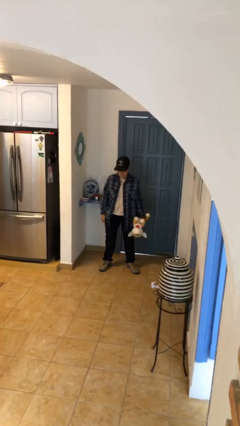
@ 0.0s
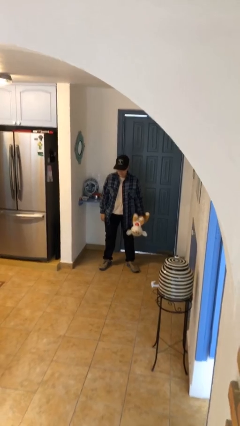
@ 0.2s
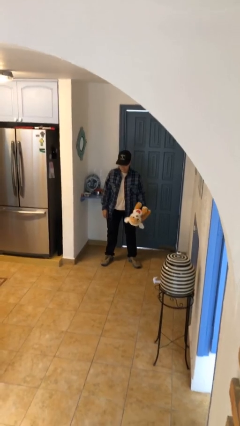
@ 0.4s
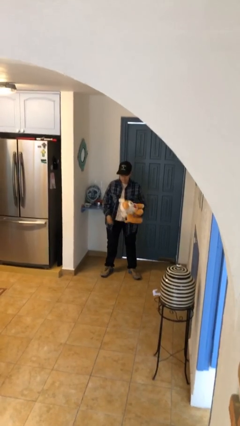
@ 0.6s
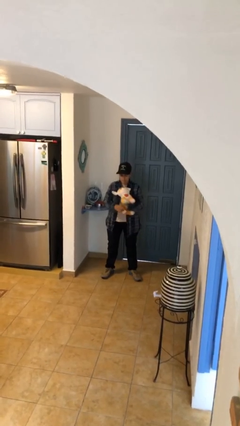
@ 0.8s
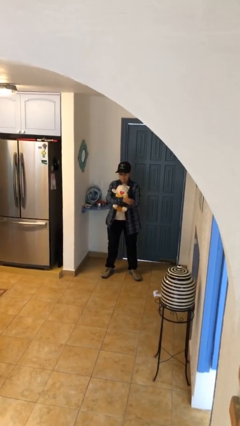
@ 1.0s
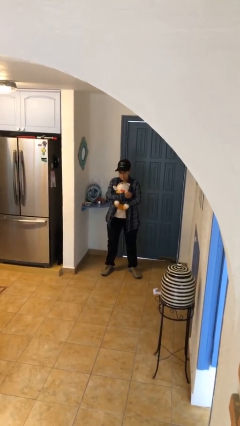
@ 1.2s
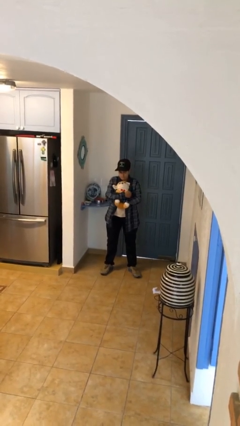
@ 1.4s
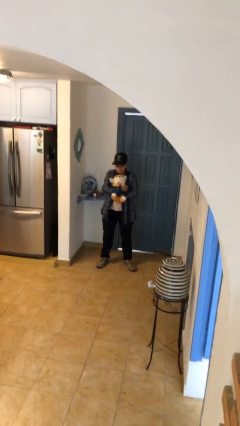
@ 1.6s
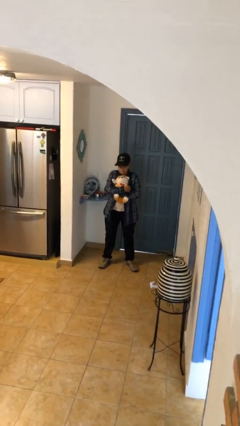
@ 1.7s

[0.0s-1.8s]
person hugs stuffed animal

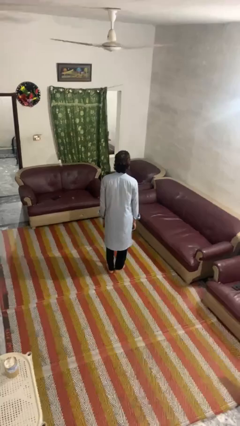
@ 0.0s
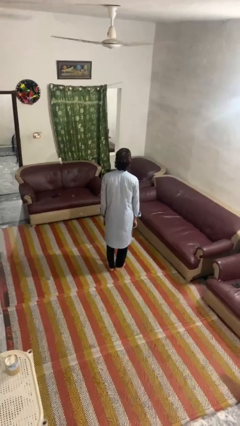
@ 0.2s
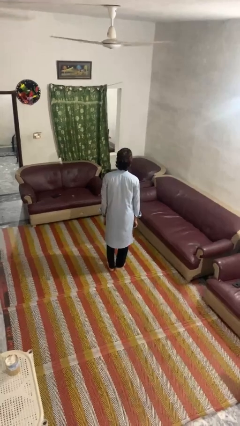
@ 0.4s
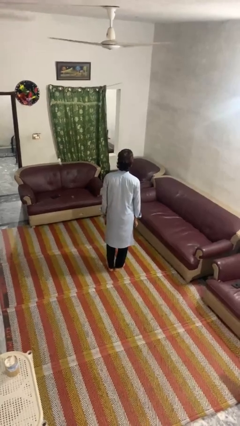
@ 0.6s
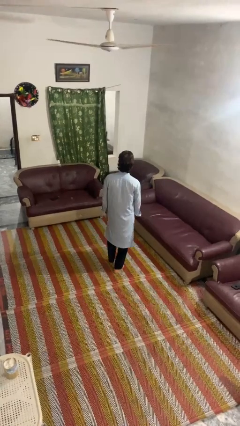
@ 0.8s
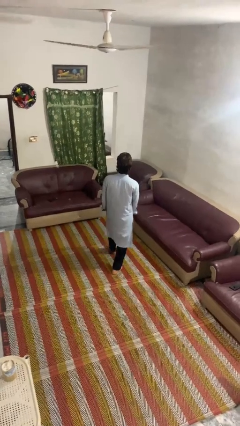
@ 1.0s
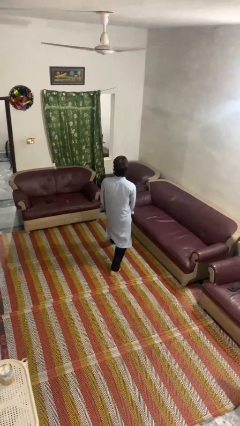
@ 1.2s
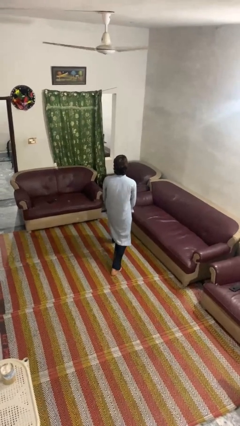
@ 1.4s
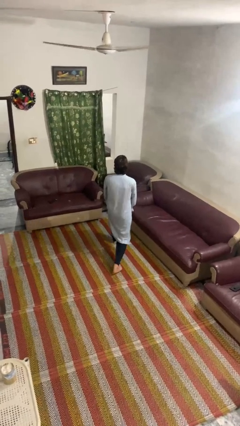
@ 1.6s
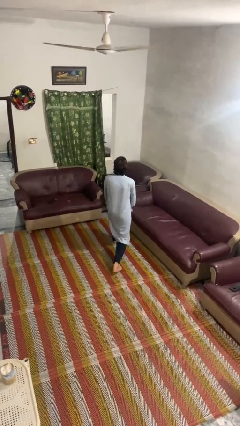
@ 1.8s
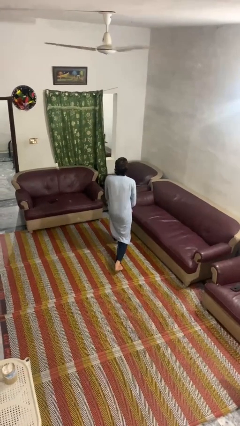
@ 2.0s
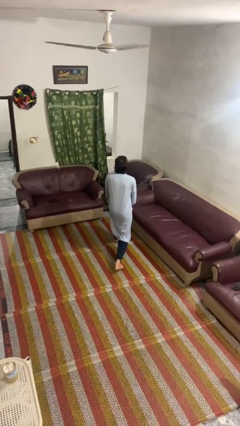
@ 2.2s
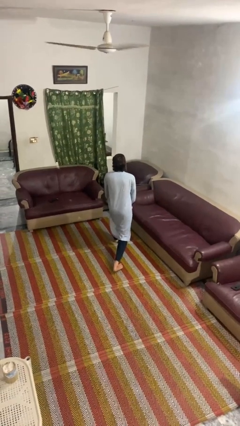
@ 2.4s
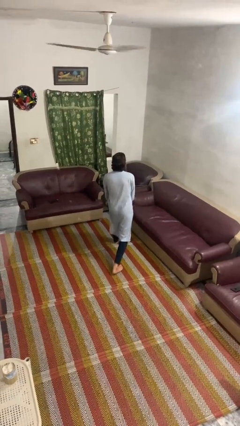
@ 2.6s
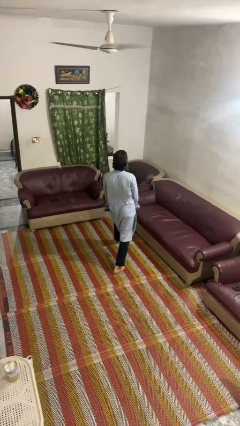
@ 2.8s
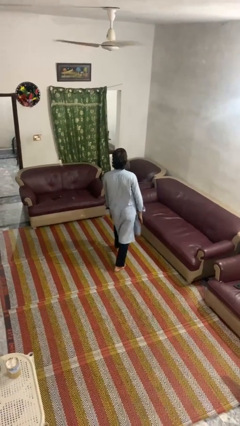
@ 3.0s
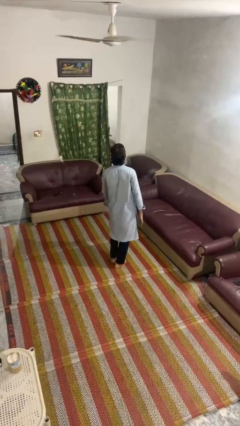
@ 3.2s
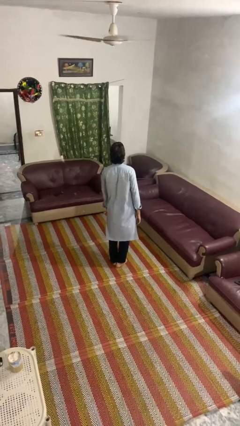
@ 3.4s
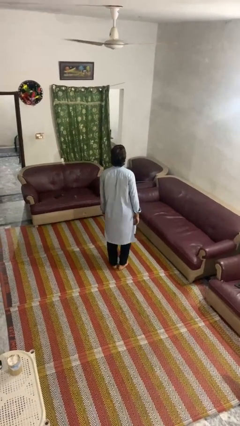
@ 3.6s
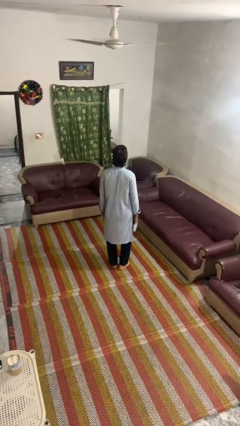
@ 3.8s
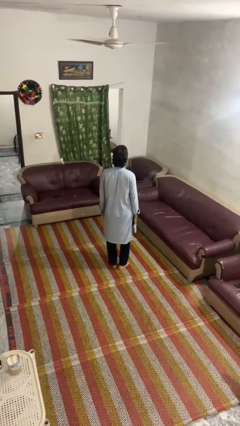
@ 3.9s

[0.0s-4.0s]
person exercises with lunges

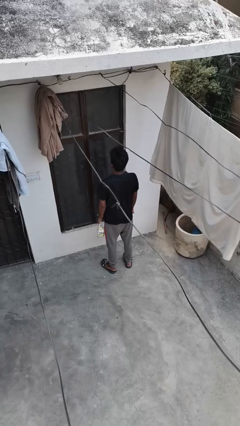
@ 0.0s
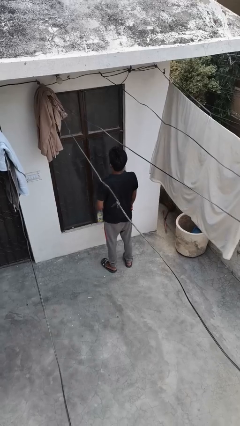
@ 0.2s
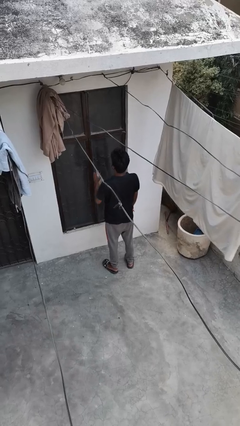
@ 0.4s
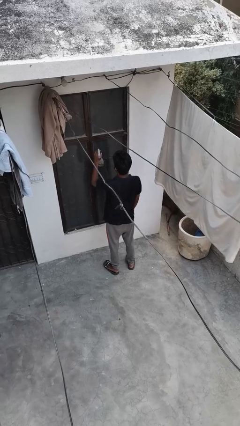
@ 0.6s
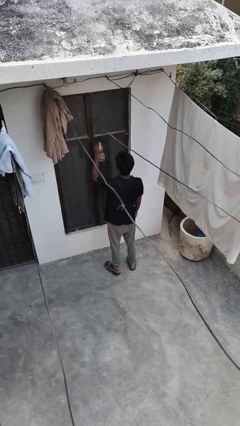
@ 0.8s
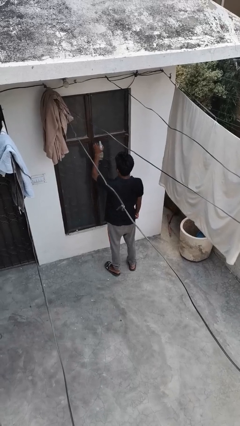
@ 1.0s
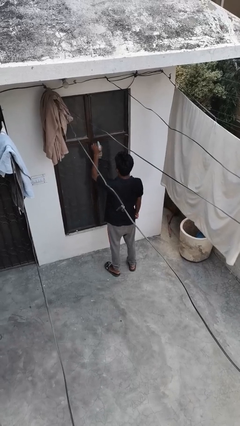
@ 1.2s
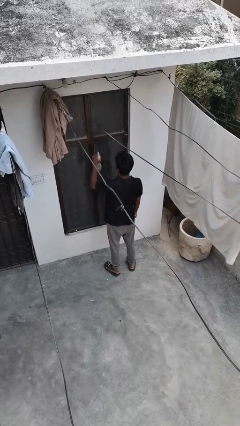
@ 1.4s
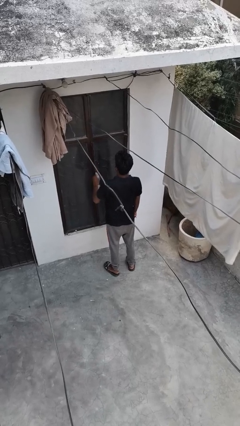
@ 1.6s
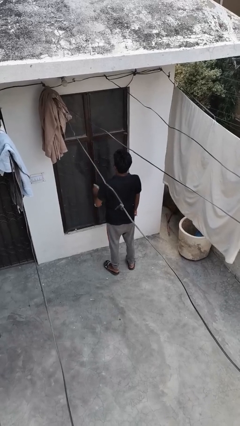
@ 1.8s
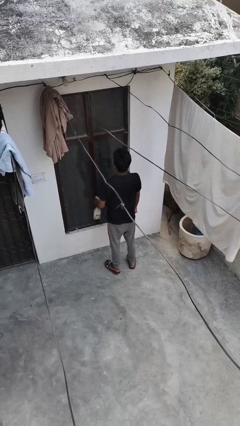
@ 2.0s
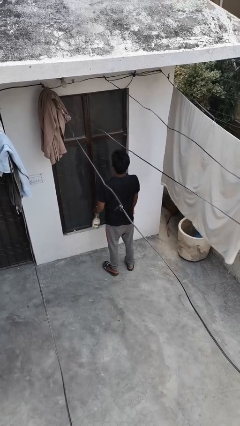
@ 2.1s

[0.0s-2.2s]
person sprays from bottle

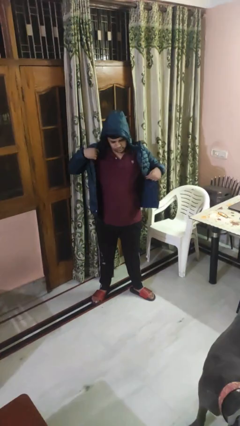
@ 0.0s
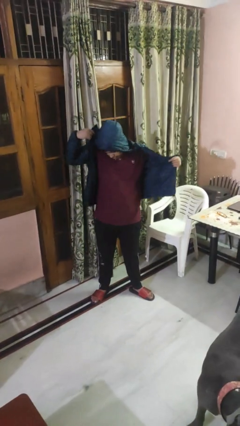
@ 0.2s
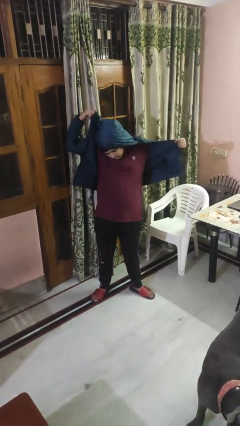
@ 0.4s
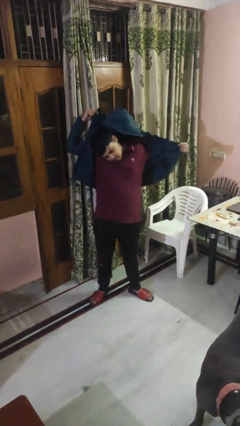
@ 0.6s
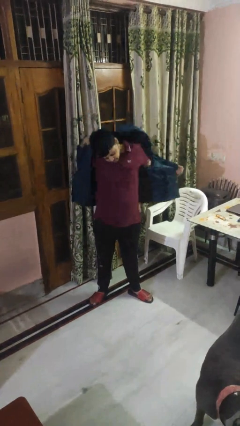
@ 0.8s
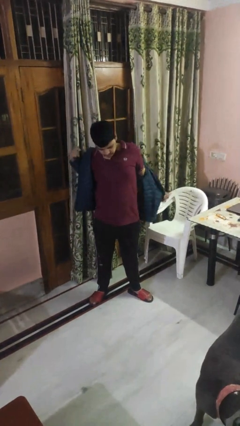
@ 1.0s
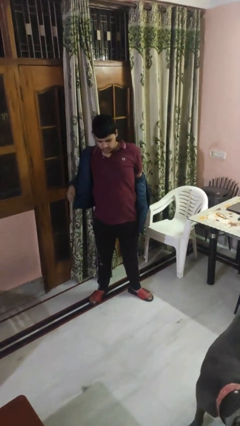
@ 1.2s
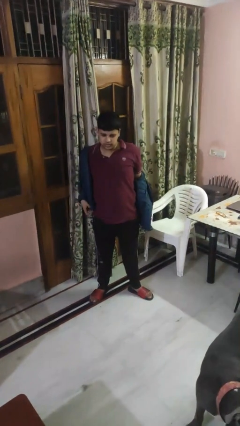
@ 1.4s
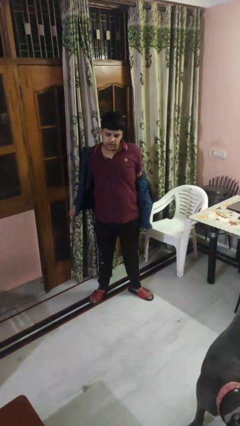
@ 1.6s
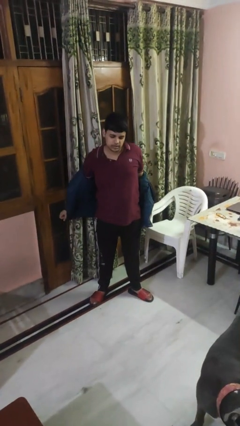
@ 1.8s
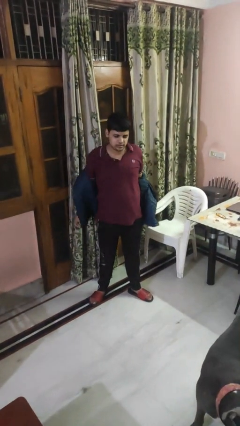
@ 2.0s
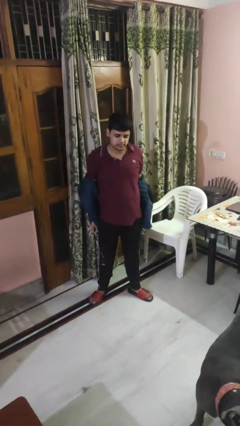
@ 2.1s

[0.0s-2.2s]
person takes off hoodie

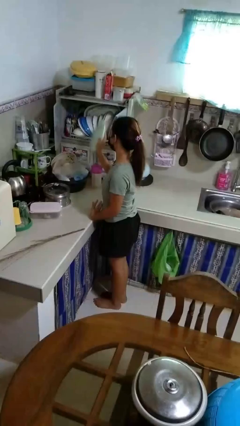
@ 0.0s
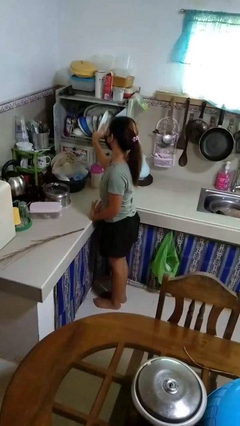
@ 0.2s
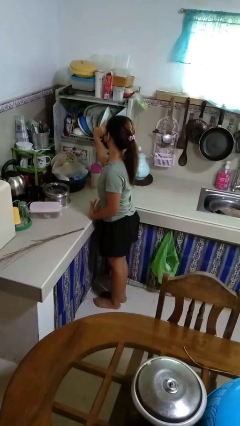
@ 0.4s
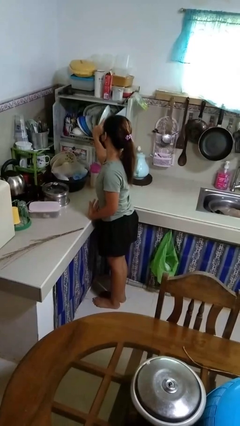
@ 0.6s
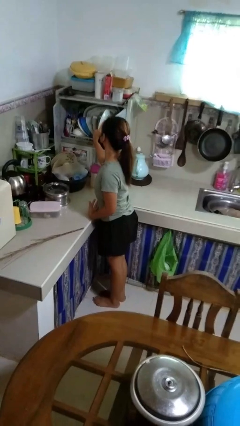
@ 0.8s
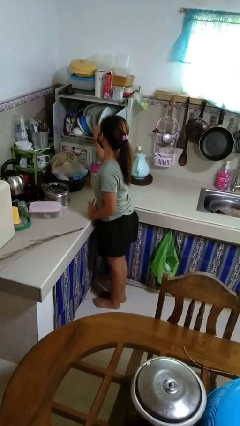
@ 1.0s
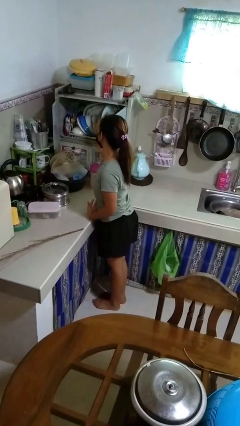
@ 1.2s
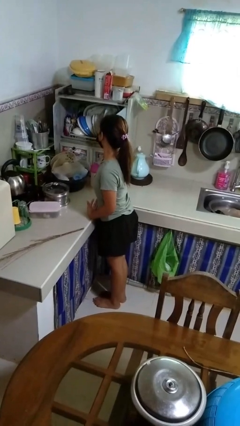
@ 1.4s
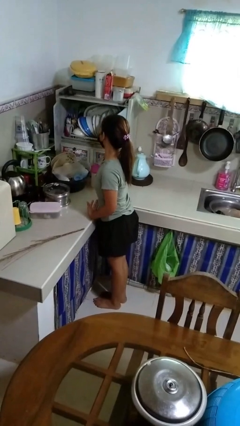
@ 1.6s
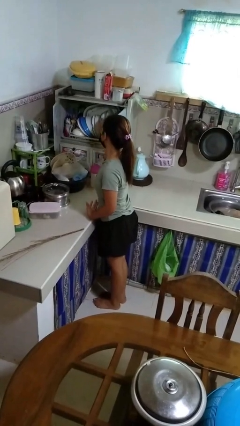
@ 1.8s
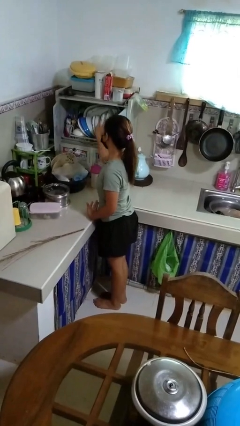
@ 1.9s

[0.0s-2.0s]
person puts object into kitchen drawer

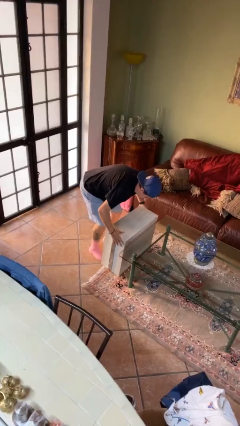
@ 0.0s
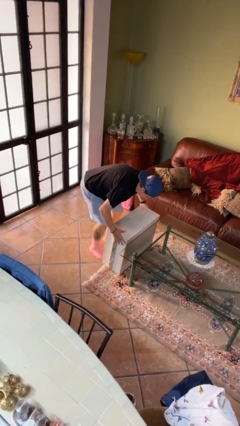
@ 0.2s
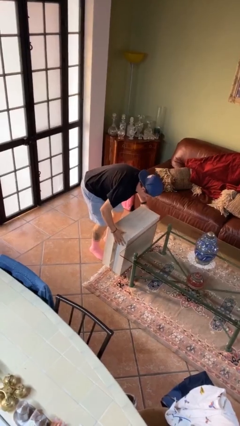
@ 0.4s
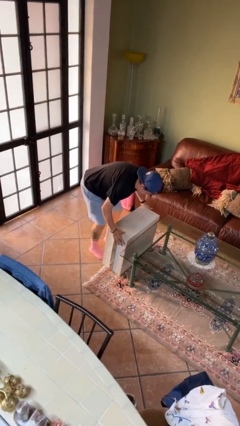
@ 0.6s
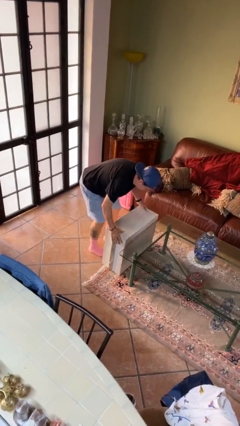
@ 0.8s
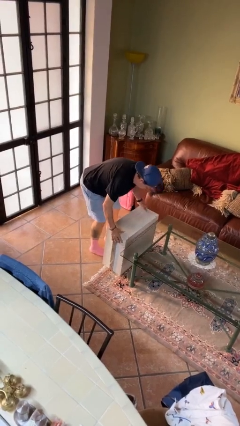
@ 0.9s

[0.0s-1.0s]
person puts down object on floor

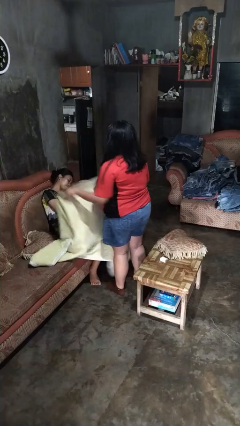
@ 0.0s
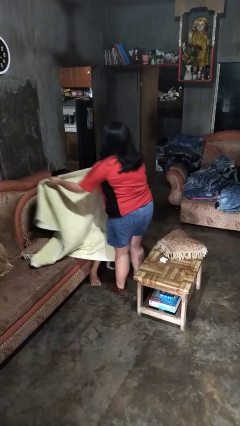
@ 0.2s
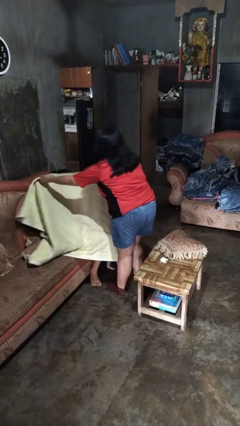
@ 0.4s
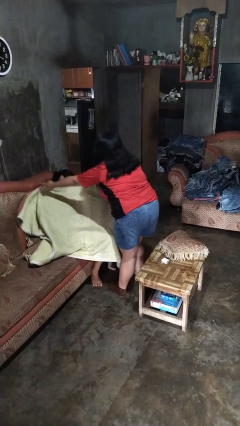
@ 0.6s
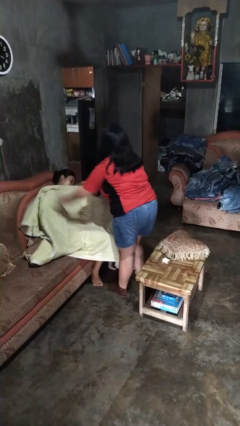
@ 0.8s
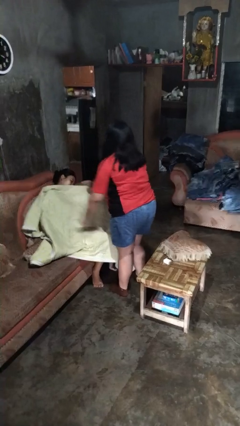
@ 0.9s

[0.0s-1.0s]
person covers friend with blanket

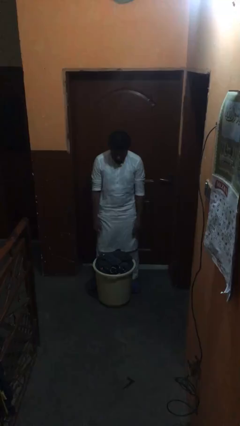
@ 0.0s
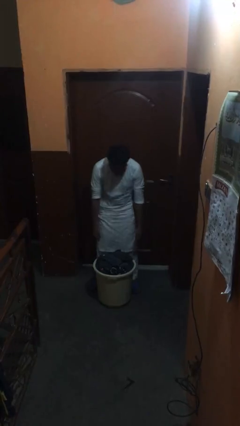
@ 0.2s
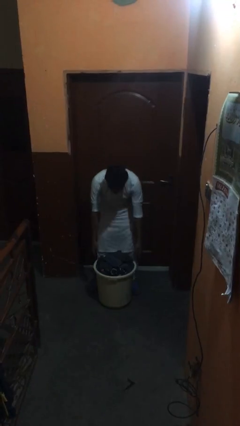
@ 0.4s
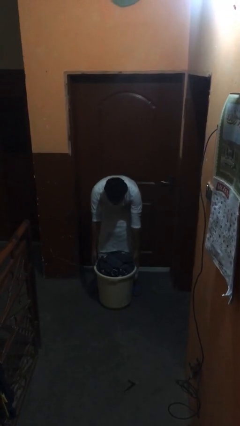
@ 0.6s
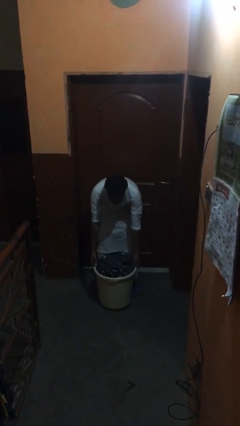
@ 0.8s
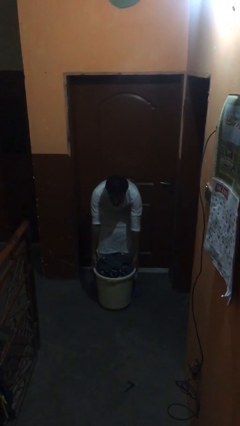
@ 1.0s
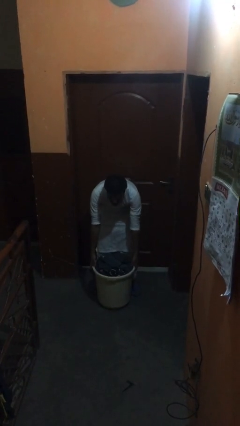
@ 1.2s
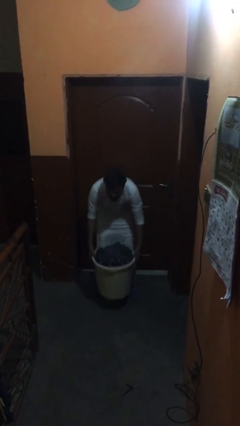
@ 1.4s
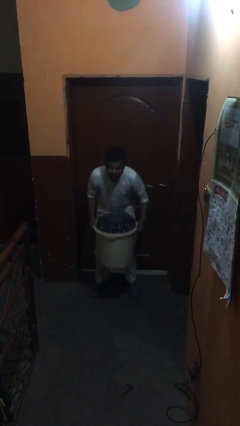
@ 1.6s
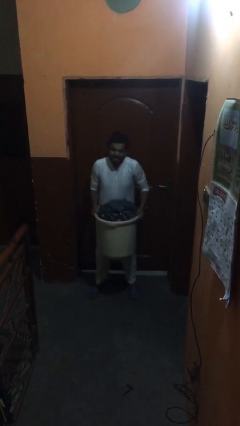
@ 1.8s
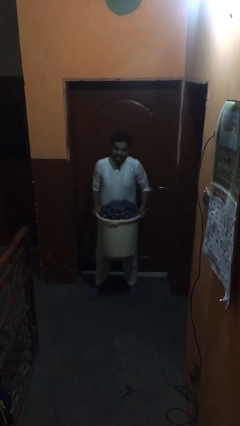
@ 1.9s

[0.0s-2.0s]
person picks up object from floor

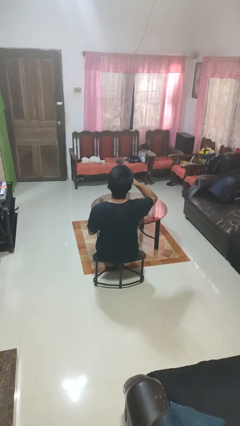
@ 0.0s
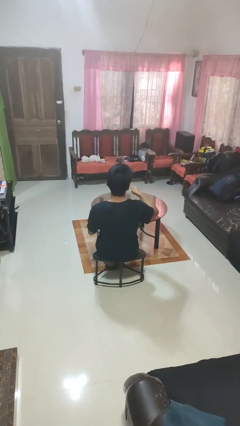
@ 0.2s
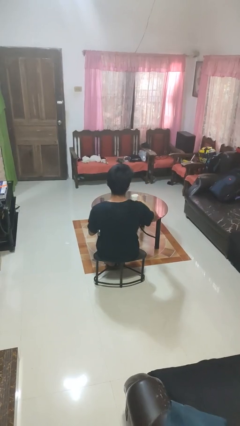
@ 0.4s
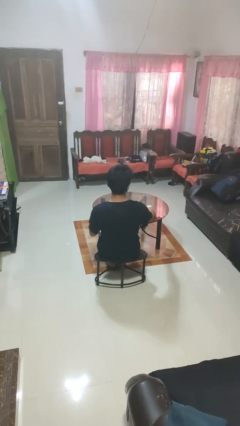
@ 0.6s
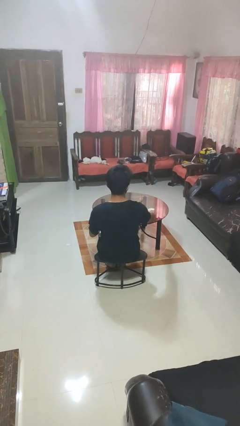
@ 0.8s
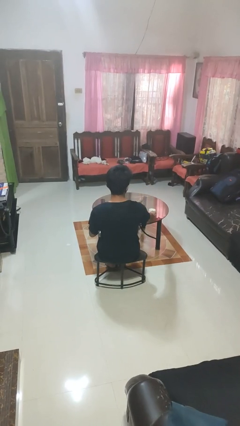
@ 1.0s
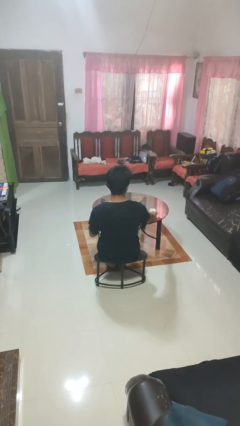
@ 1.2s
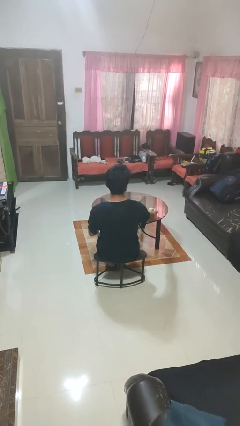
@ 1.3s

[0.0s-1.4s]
person puts down object on table
